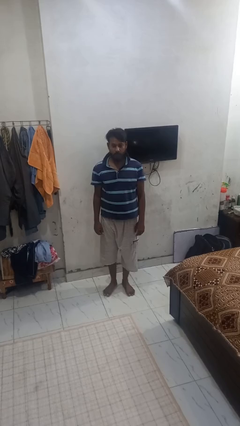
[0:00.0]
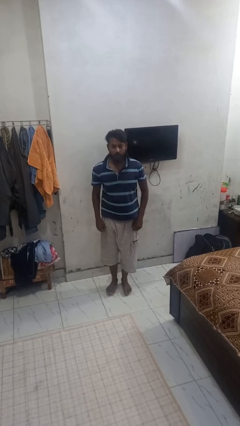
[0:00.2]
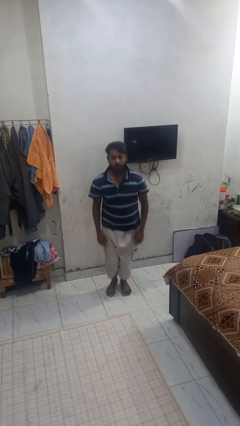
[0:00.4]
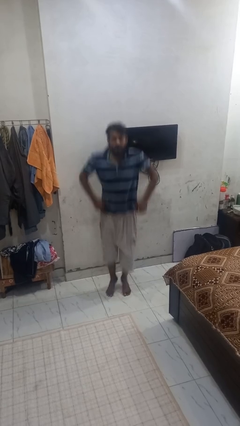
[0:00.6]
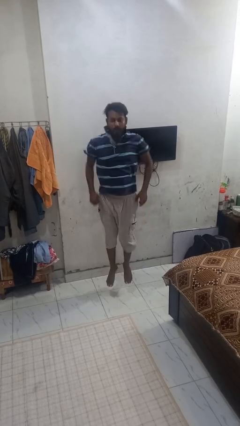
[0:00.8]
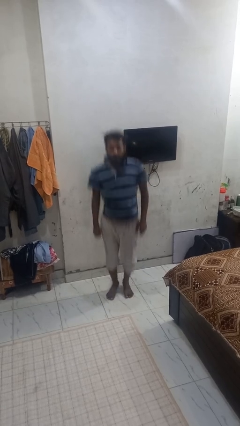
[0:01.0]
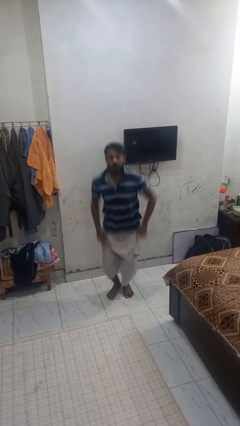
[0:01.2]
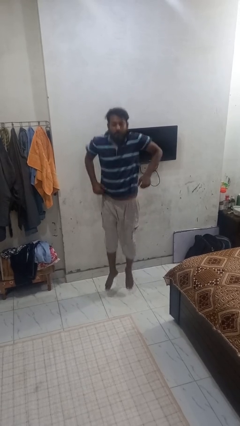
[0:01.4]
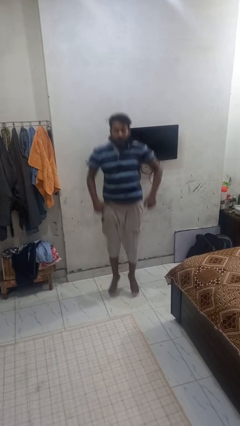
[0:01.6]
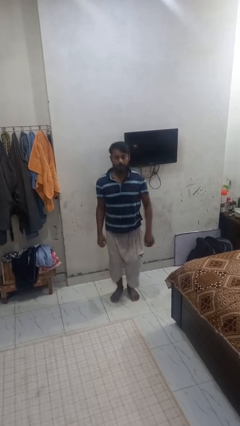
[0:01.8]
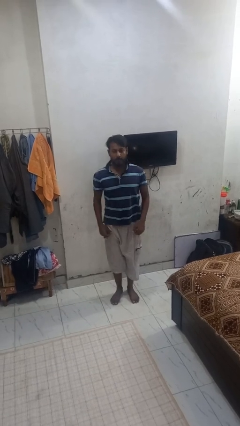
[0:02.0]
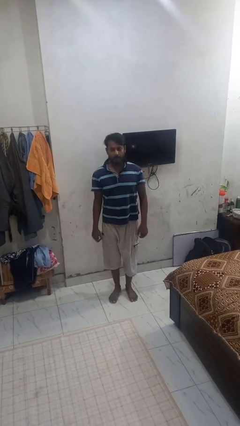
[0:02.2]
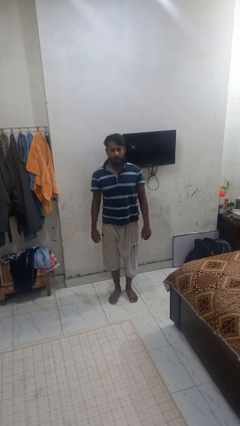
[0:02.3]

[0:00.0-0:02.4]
person jumps

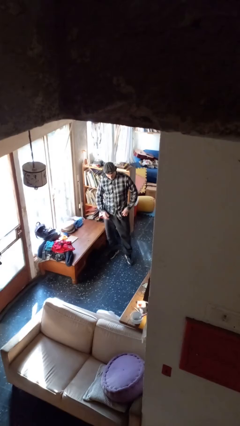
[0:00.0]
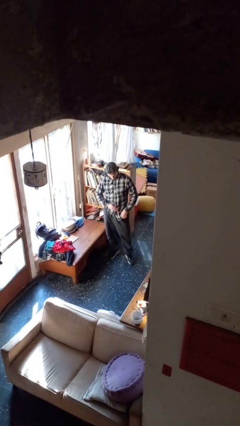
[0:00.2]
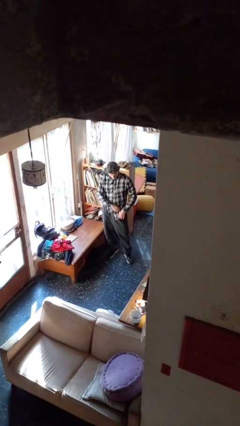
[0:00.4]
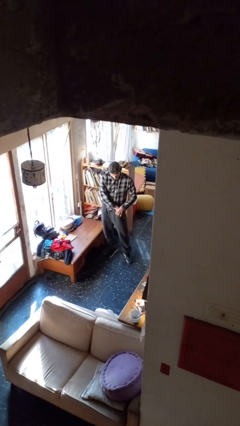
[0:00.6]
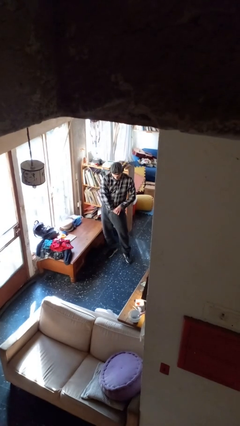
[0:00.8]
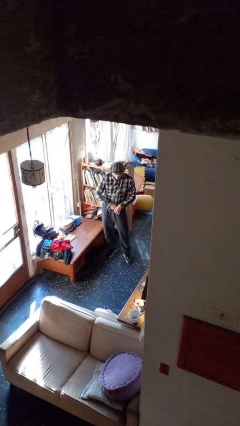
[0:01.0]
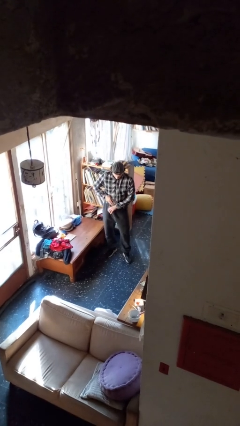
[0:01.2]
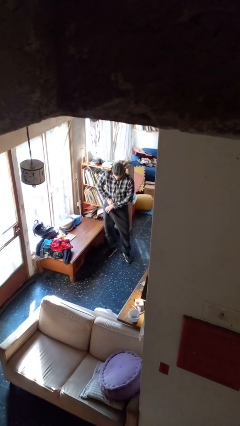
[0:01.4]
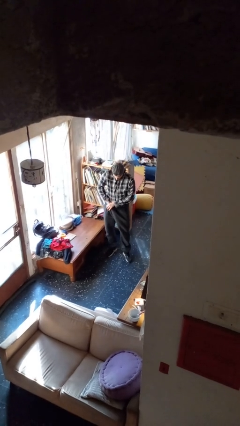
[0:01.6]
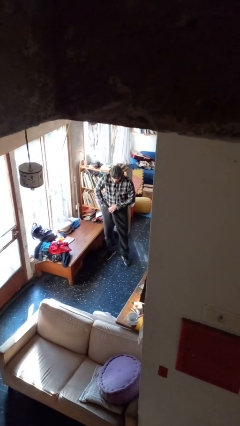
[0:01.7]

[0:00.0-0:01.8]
person tucks in shirt

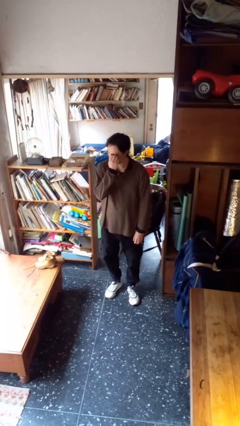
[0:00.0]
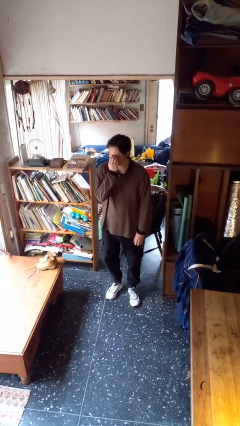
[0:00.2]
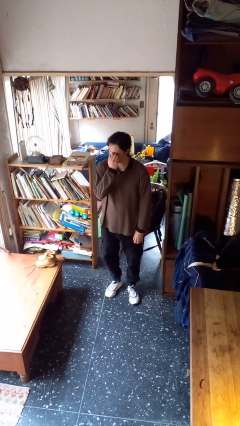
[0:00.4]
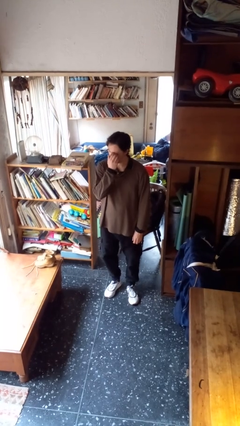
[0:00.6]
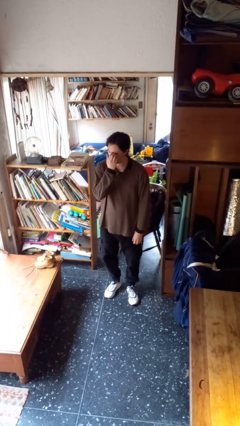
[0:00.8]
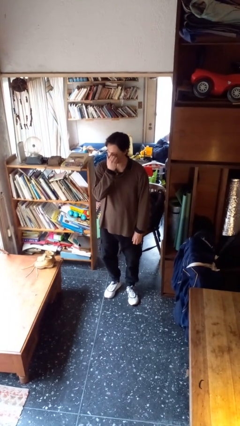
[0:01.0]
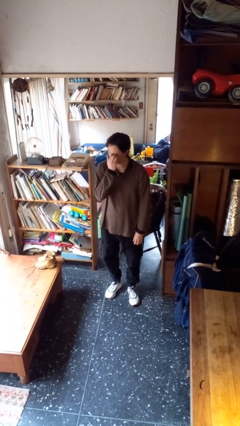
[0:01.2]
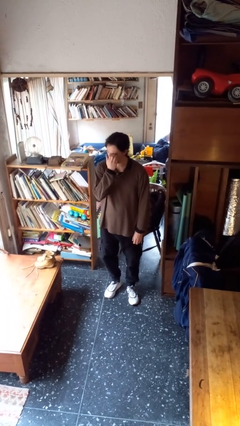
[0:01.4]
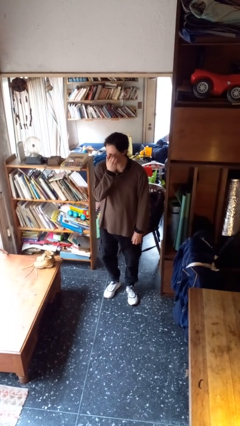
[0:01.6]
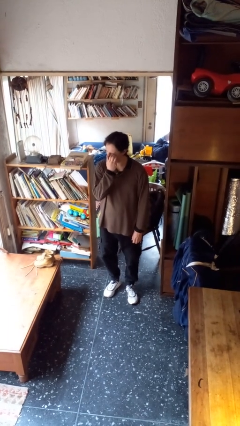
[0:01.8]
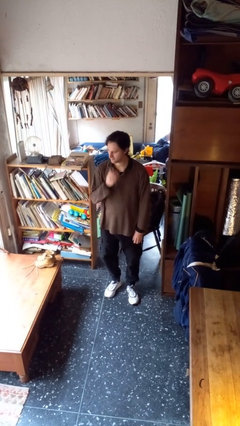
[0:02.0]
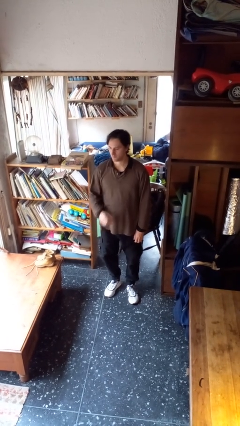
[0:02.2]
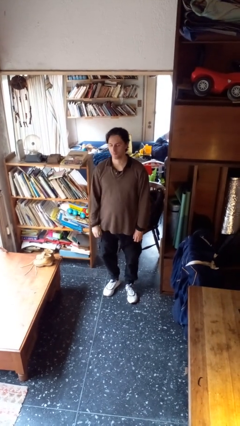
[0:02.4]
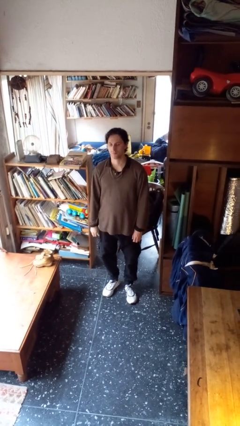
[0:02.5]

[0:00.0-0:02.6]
person scratches face

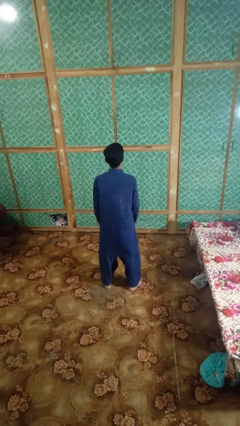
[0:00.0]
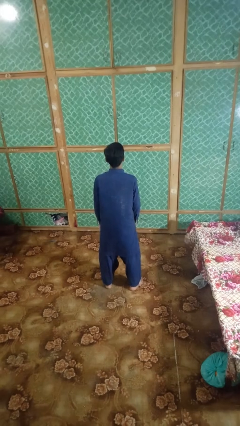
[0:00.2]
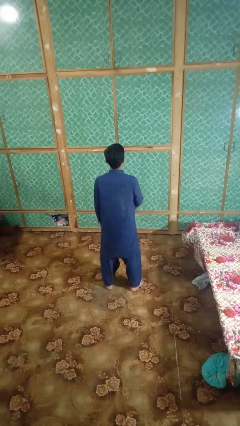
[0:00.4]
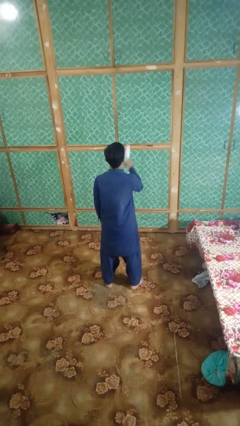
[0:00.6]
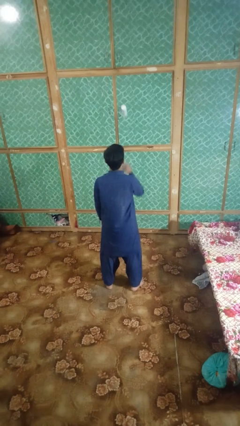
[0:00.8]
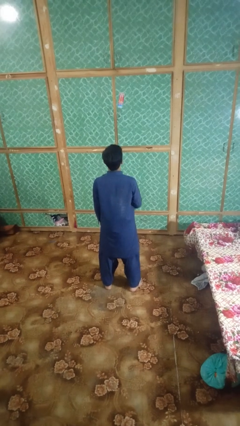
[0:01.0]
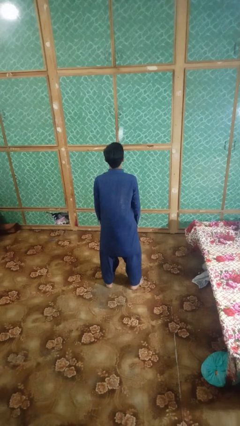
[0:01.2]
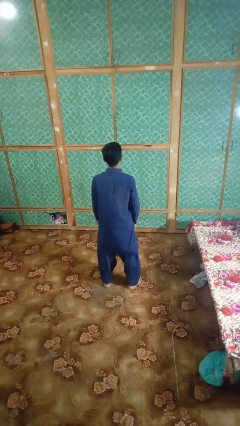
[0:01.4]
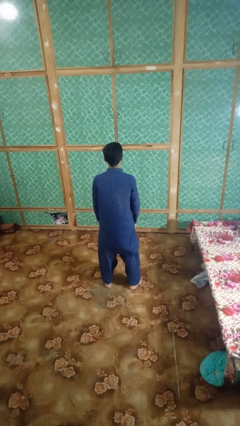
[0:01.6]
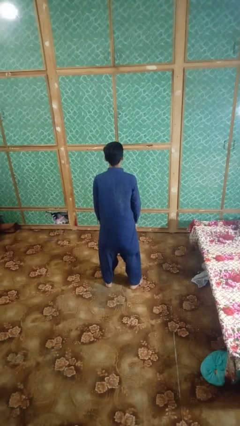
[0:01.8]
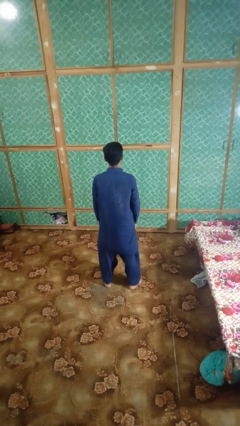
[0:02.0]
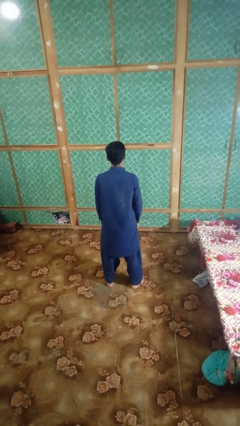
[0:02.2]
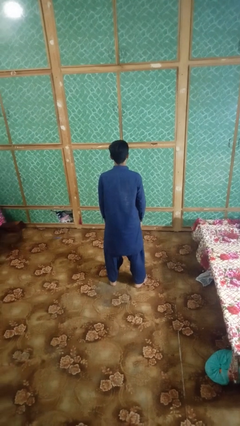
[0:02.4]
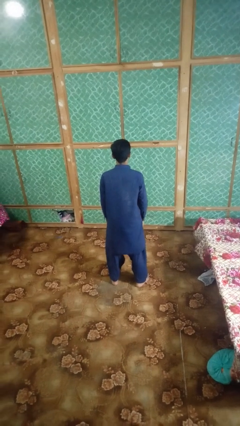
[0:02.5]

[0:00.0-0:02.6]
person throws object into air

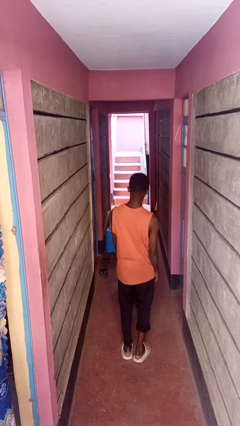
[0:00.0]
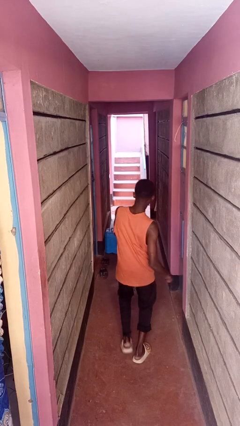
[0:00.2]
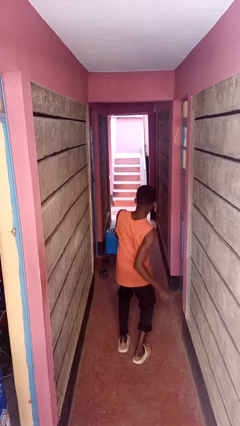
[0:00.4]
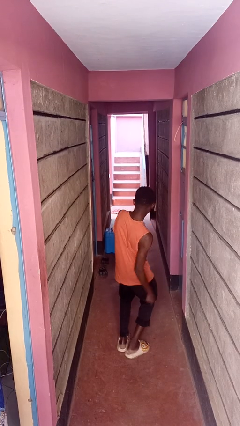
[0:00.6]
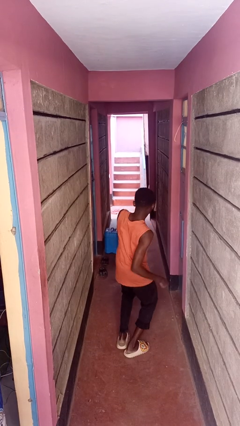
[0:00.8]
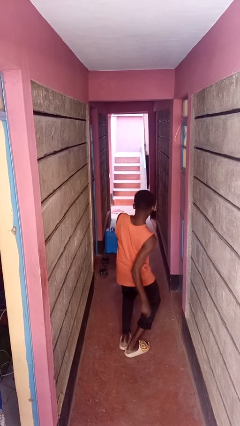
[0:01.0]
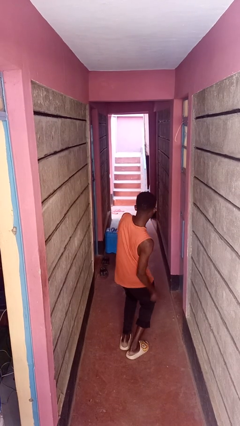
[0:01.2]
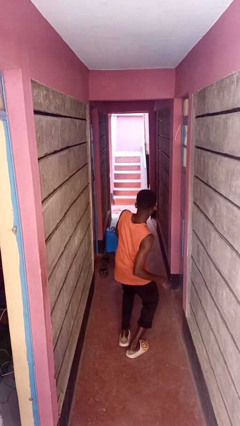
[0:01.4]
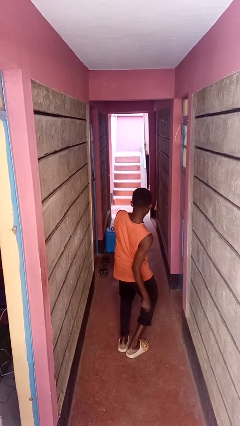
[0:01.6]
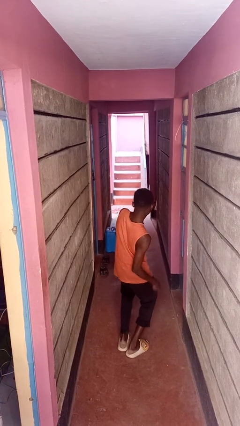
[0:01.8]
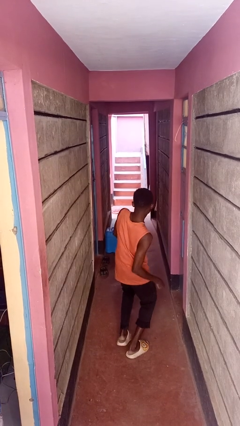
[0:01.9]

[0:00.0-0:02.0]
person dances in place

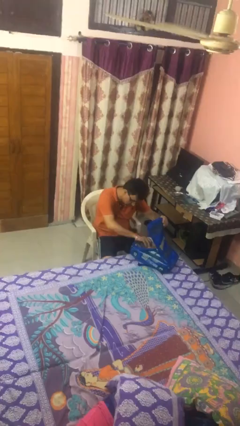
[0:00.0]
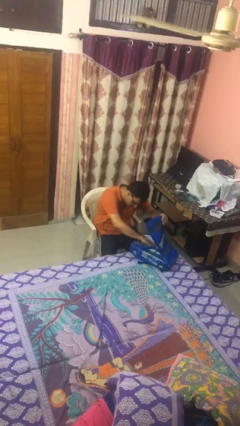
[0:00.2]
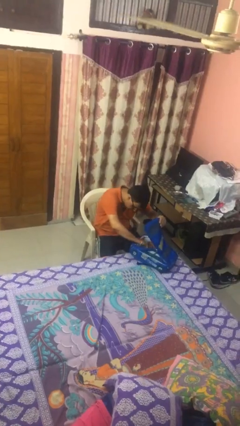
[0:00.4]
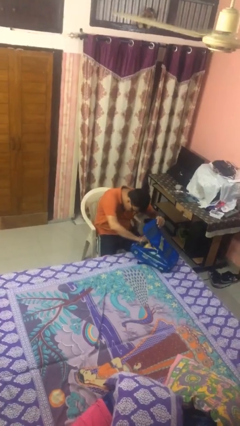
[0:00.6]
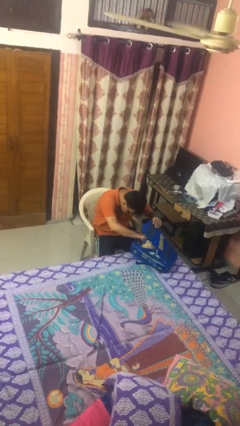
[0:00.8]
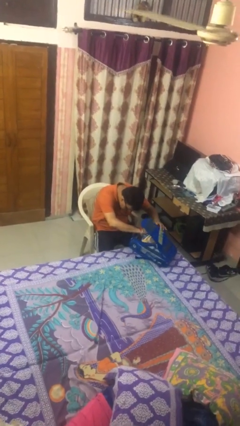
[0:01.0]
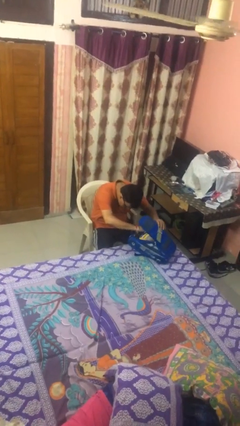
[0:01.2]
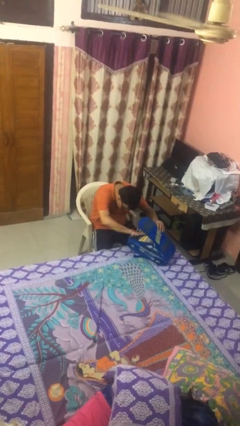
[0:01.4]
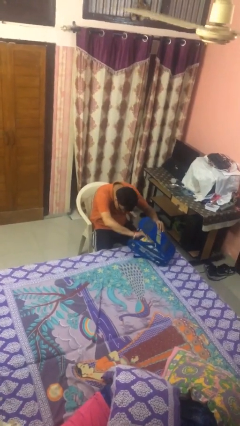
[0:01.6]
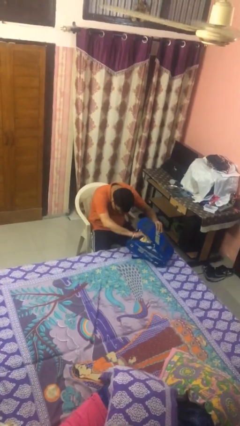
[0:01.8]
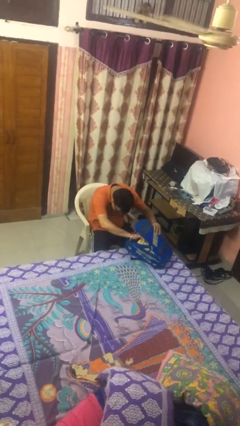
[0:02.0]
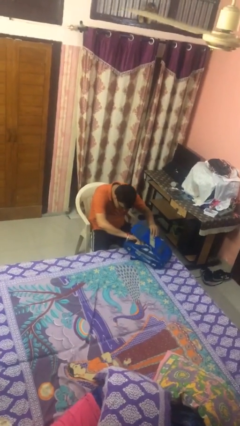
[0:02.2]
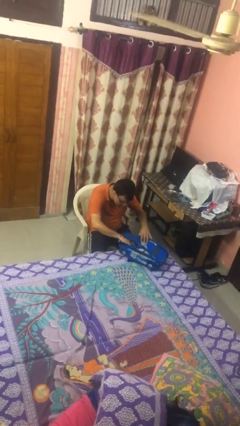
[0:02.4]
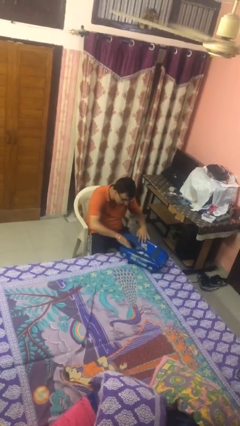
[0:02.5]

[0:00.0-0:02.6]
person searches in bag

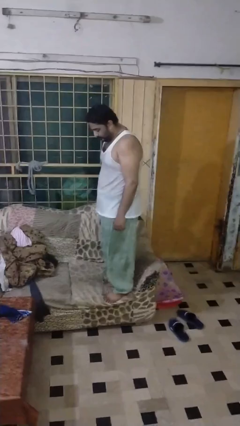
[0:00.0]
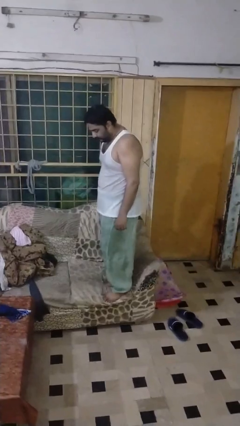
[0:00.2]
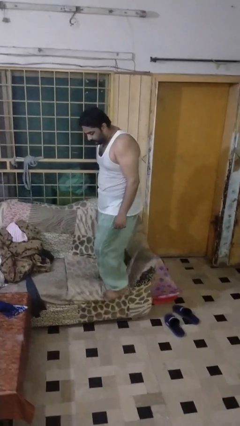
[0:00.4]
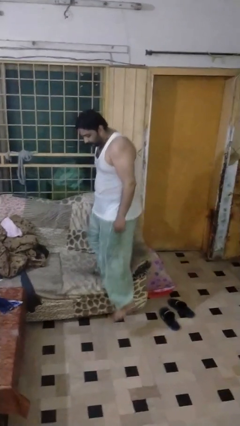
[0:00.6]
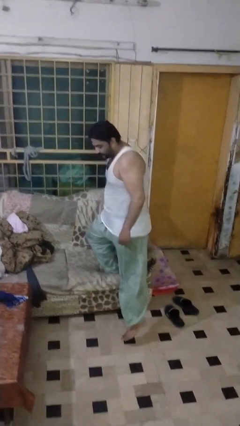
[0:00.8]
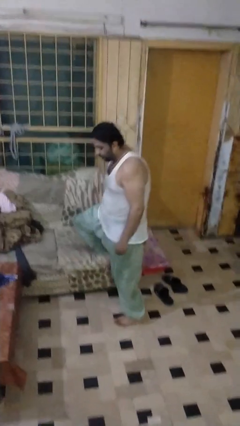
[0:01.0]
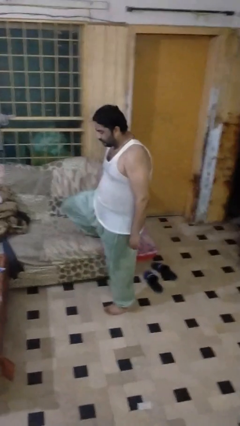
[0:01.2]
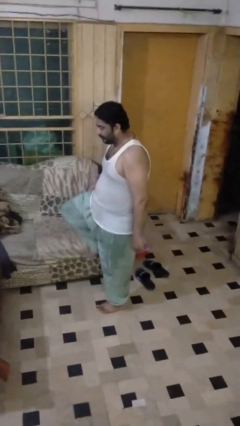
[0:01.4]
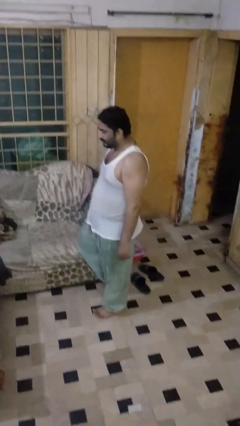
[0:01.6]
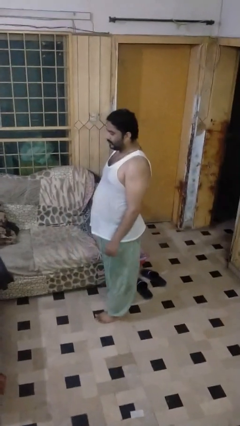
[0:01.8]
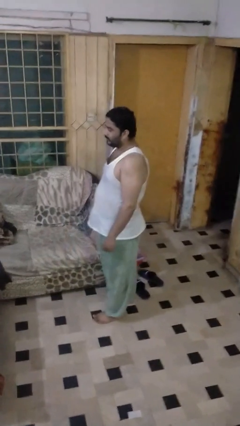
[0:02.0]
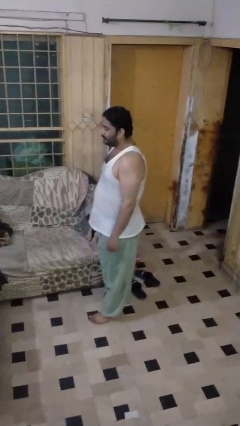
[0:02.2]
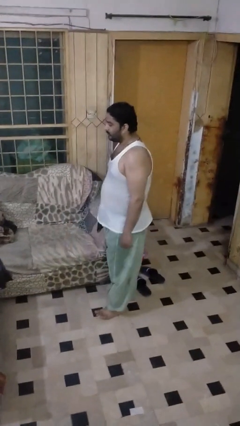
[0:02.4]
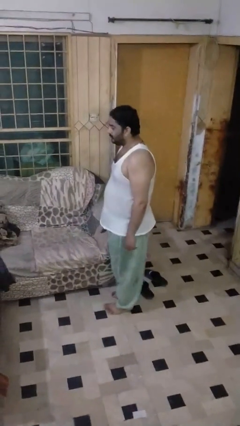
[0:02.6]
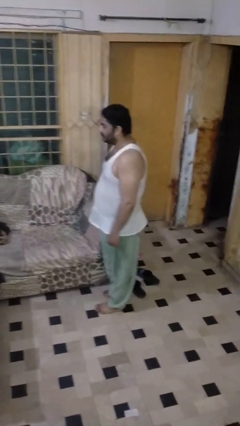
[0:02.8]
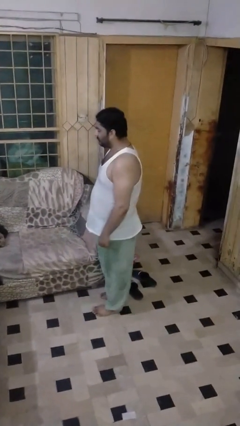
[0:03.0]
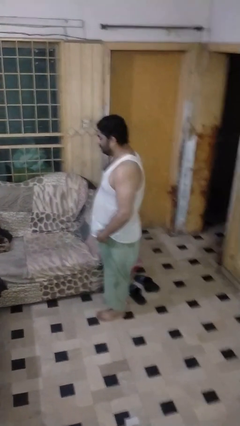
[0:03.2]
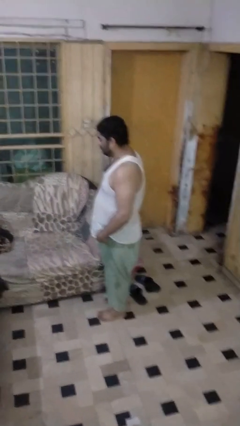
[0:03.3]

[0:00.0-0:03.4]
person climbs off couch
